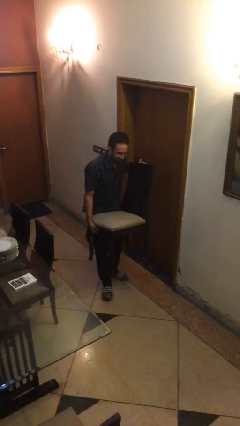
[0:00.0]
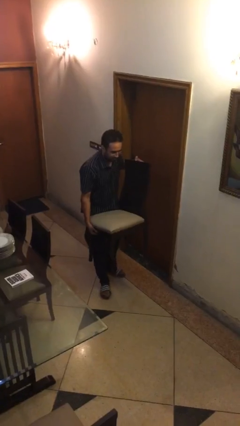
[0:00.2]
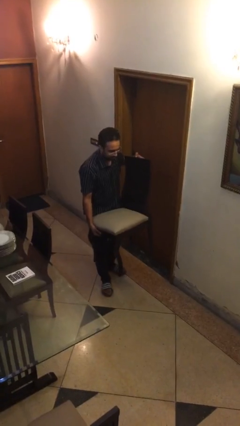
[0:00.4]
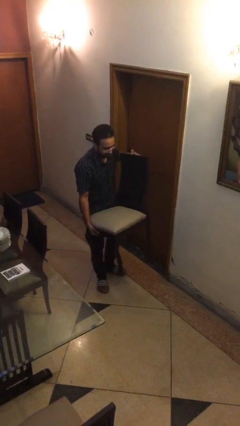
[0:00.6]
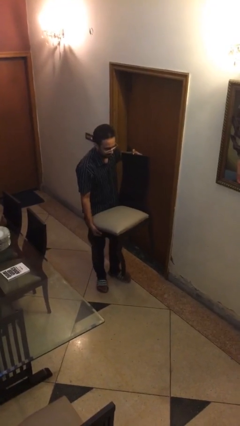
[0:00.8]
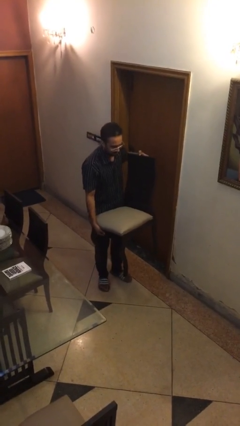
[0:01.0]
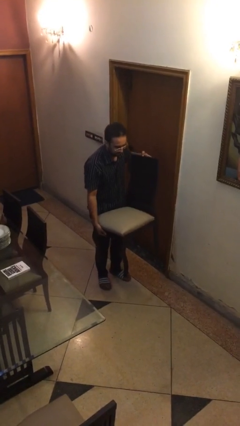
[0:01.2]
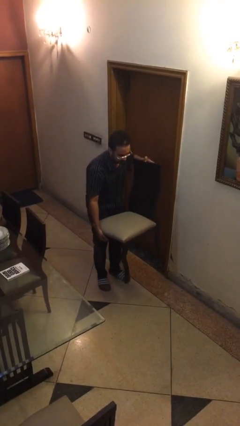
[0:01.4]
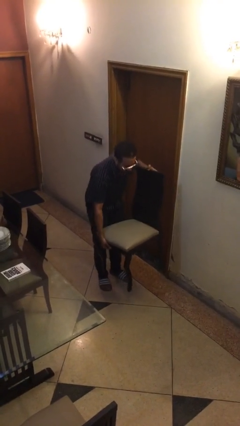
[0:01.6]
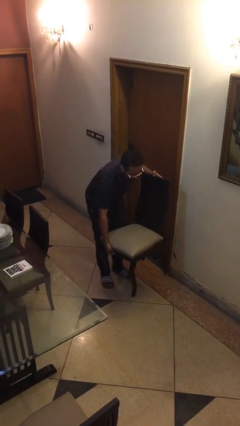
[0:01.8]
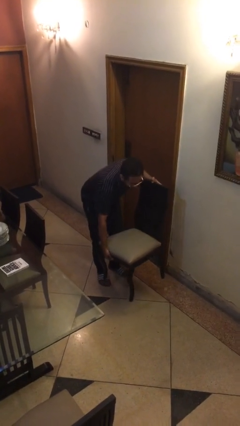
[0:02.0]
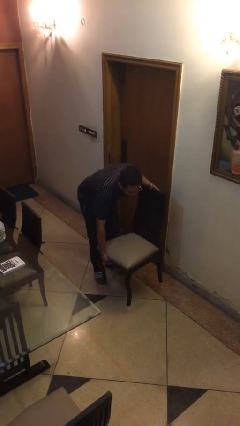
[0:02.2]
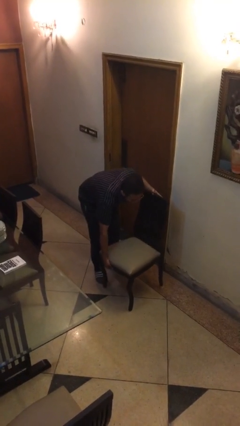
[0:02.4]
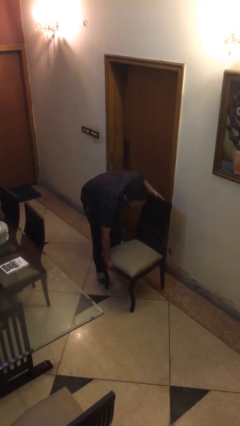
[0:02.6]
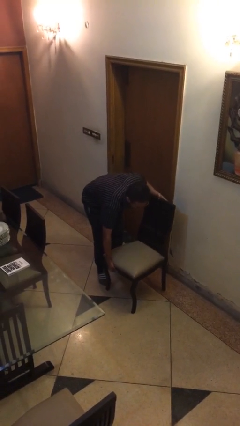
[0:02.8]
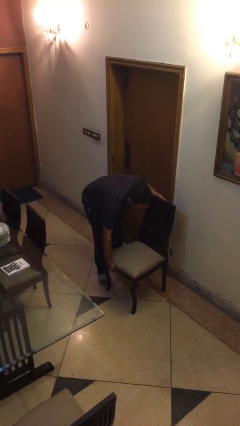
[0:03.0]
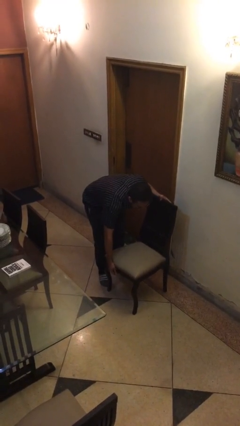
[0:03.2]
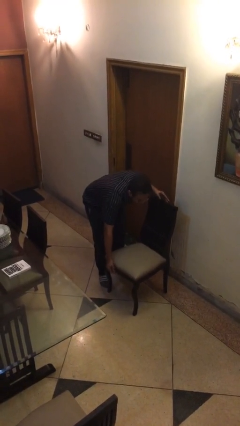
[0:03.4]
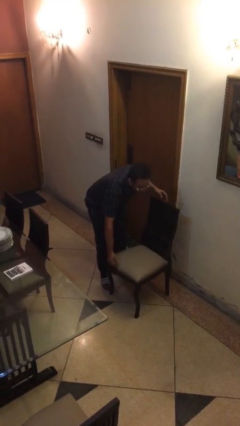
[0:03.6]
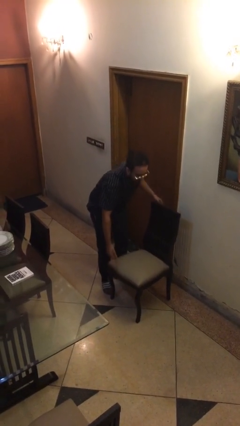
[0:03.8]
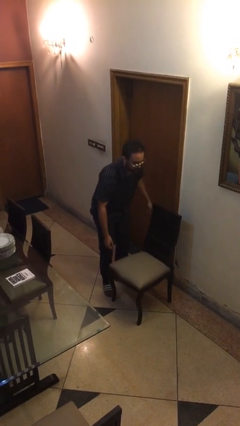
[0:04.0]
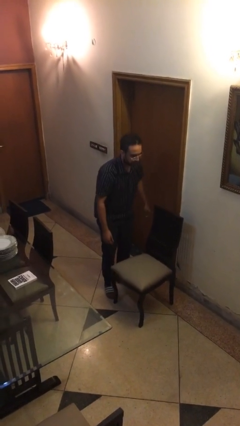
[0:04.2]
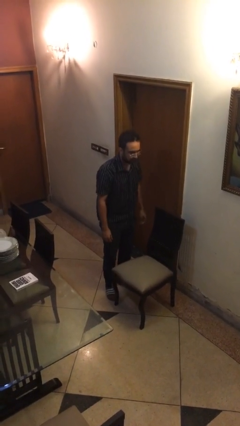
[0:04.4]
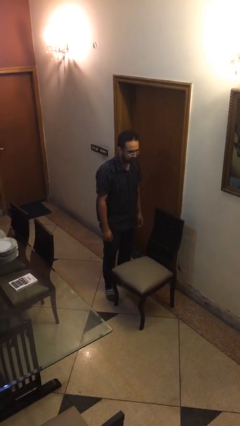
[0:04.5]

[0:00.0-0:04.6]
person puts down object on floor

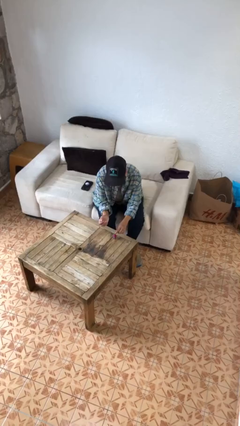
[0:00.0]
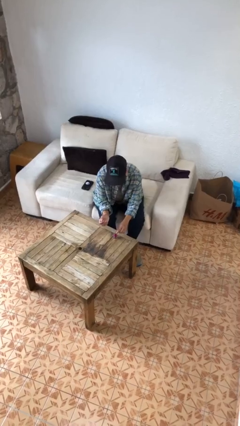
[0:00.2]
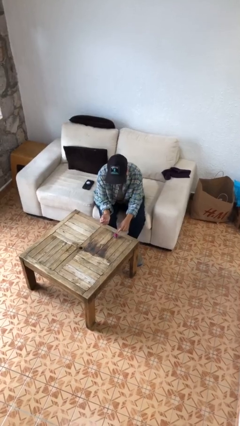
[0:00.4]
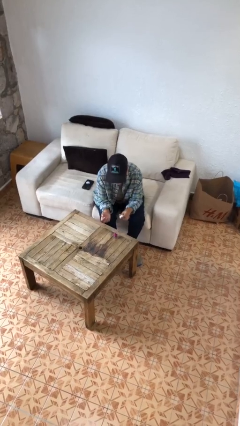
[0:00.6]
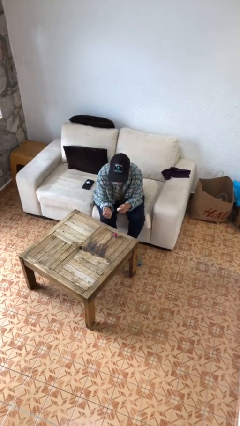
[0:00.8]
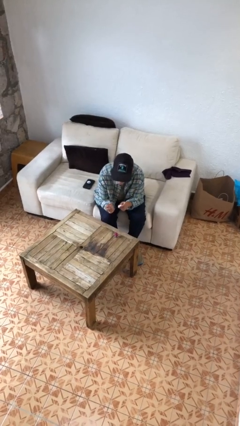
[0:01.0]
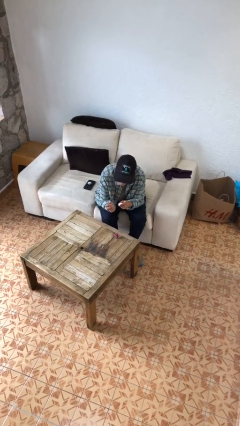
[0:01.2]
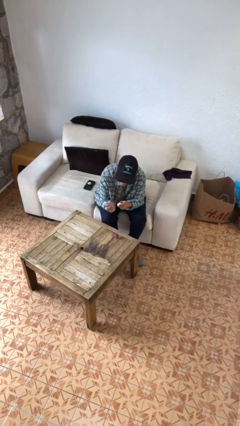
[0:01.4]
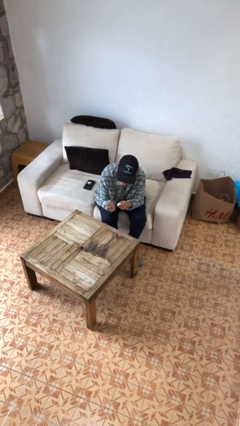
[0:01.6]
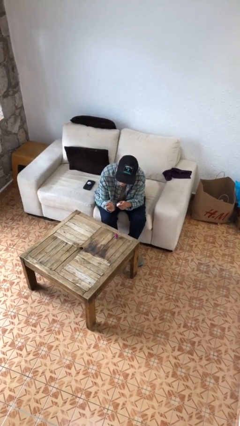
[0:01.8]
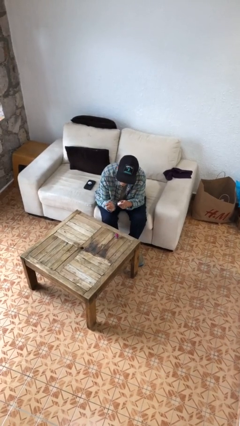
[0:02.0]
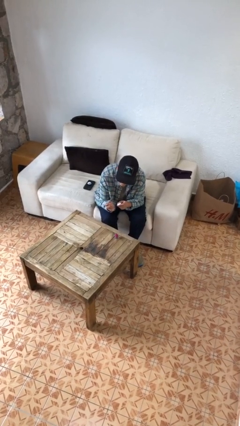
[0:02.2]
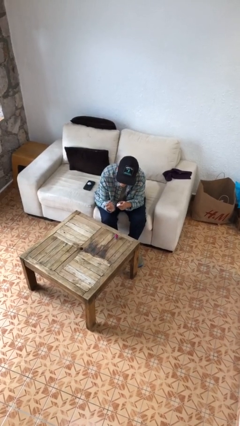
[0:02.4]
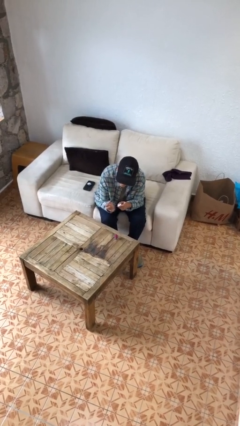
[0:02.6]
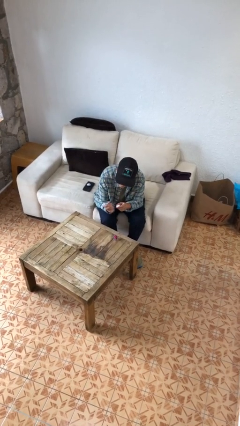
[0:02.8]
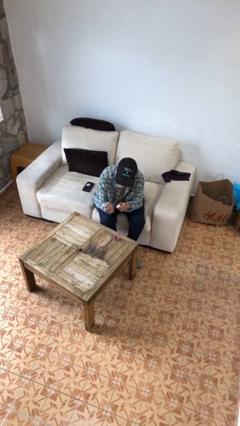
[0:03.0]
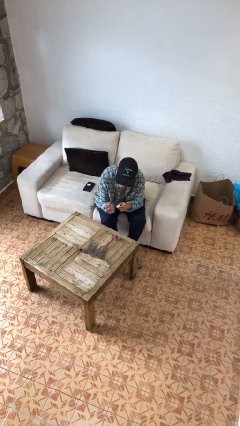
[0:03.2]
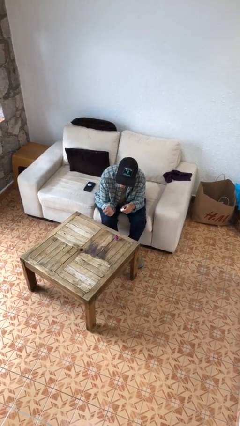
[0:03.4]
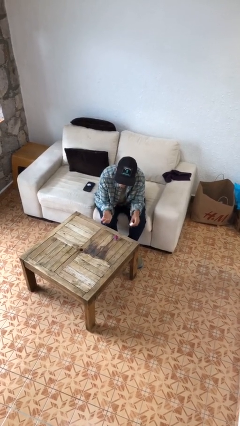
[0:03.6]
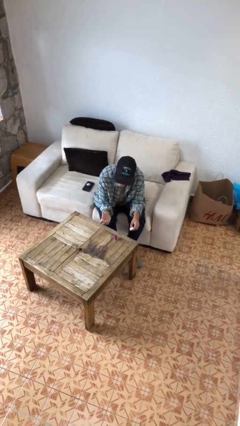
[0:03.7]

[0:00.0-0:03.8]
person paints fingernails

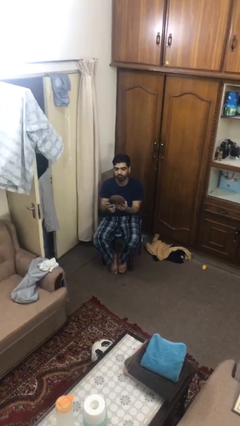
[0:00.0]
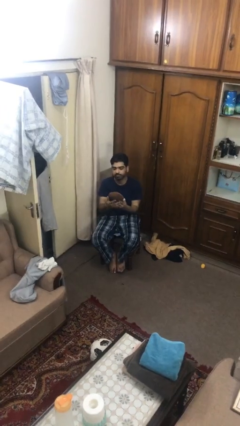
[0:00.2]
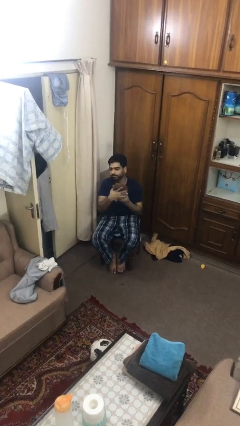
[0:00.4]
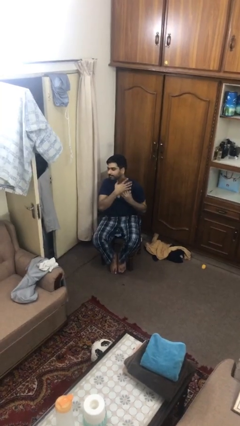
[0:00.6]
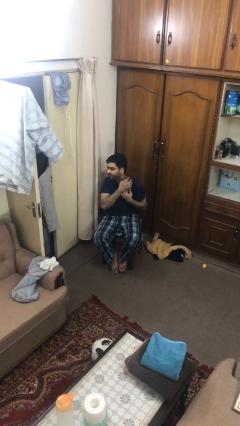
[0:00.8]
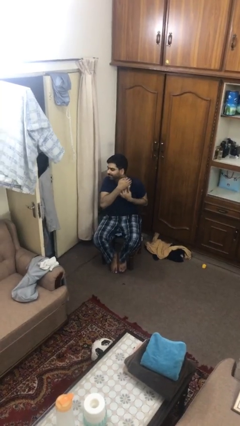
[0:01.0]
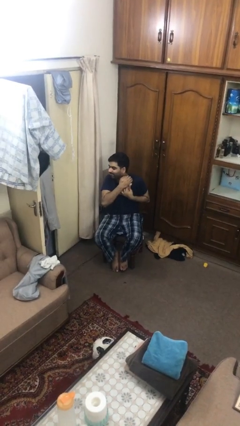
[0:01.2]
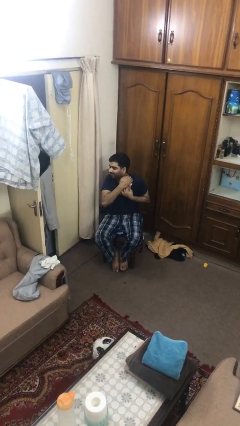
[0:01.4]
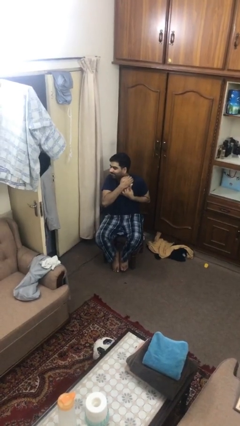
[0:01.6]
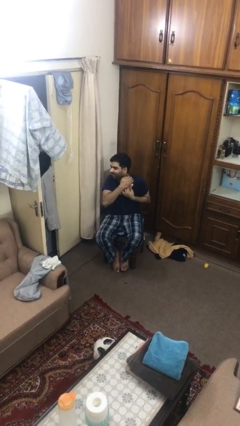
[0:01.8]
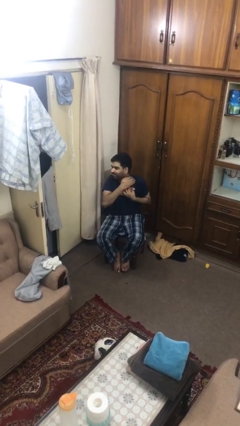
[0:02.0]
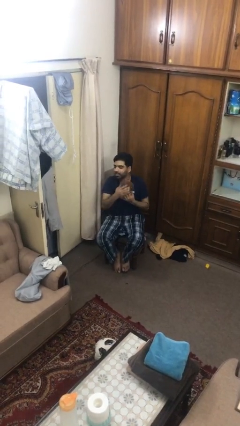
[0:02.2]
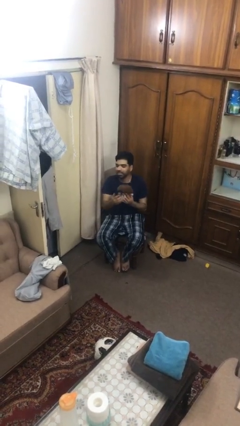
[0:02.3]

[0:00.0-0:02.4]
person hugs stuffed animal

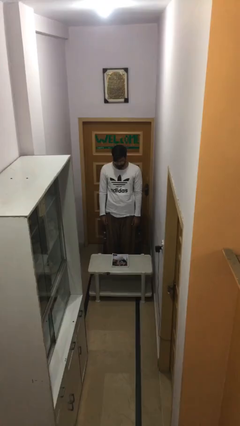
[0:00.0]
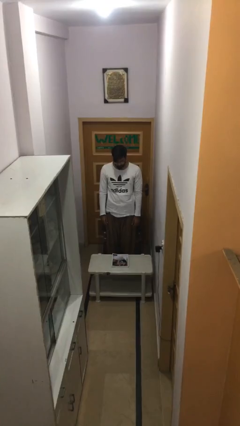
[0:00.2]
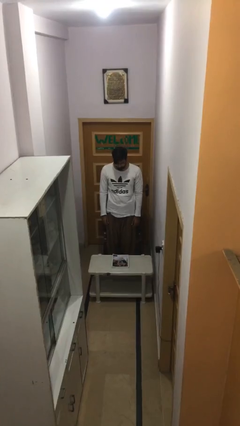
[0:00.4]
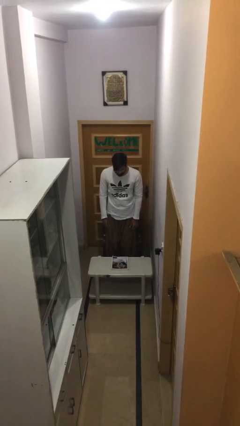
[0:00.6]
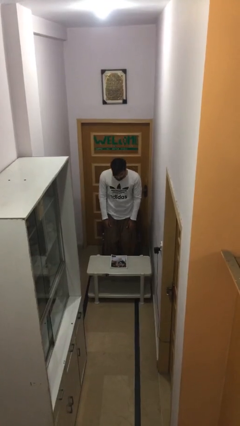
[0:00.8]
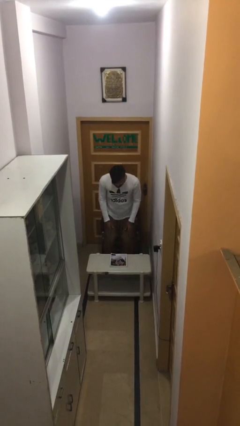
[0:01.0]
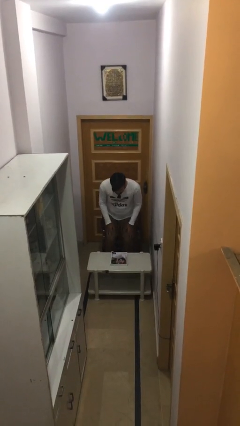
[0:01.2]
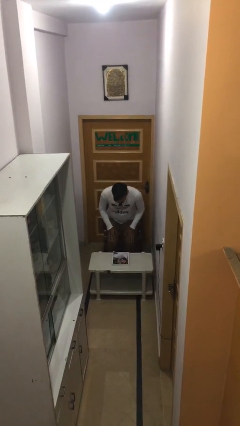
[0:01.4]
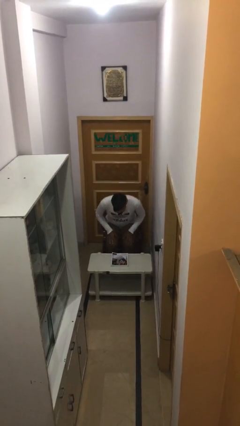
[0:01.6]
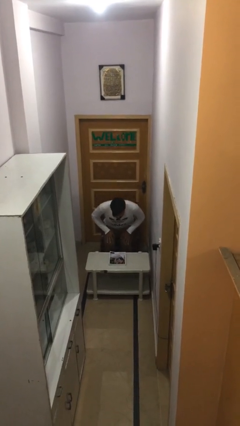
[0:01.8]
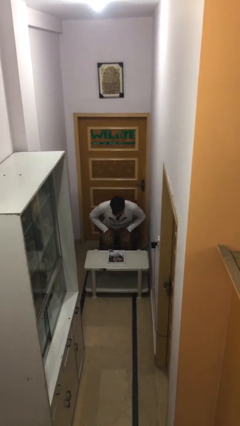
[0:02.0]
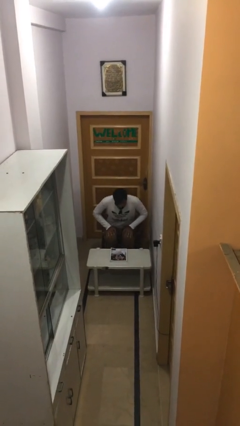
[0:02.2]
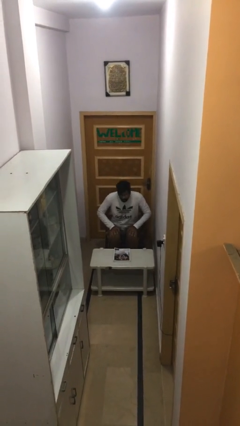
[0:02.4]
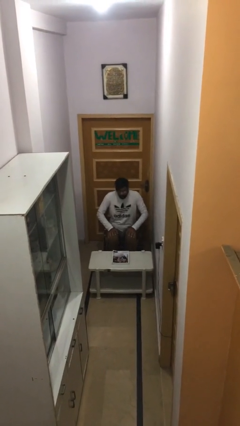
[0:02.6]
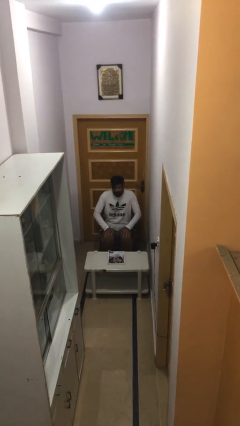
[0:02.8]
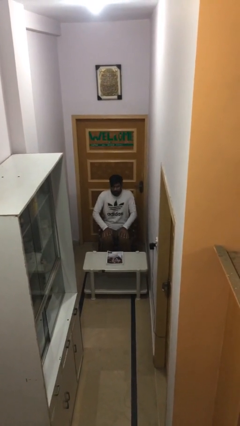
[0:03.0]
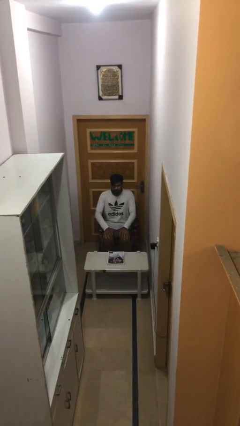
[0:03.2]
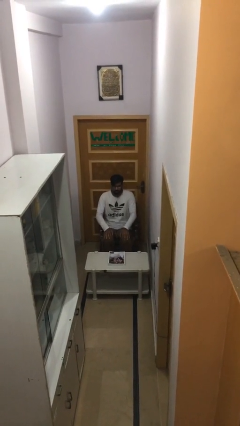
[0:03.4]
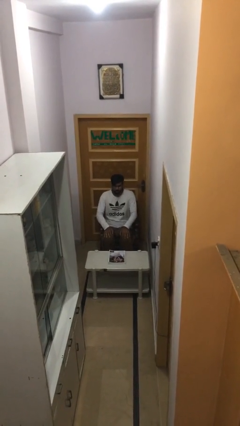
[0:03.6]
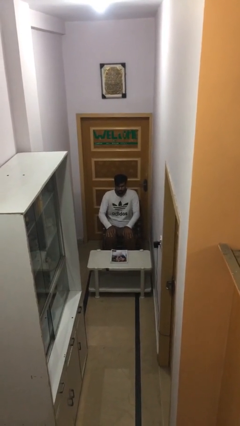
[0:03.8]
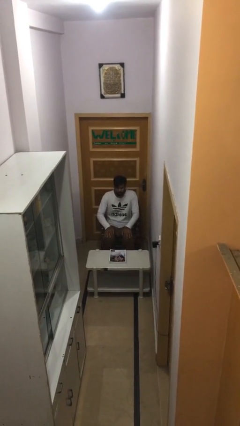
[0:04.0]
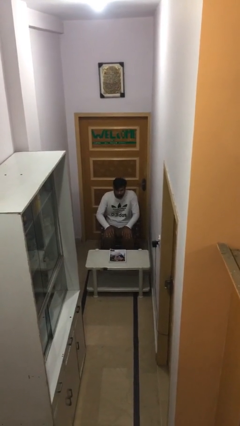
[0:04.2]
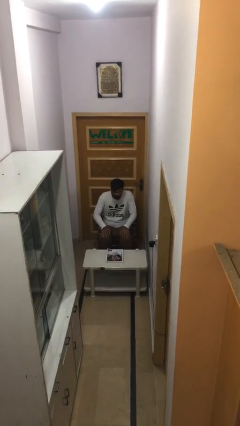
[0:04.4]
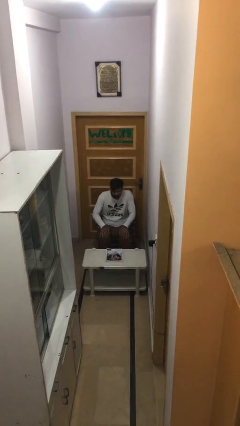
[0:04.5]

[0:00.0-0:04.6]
person sits down

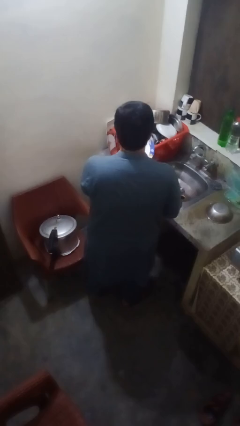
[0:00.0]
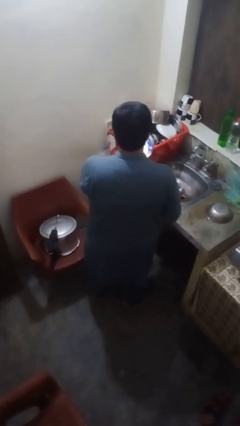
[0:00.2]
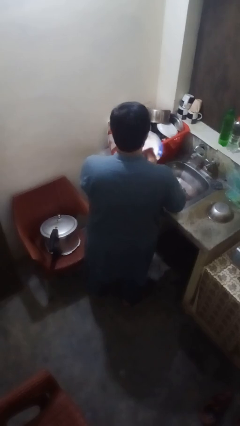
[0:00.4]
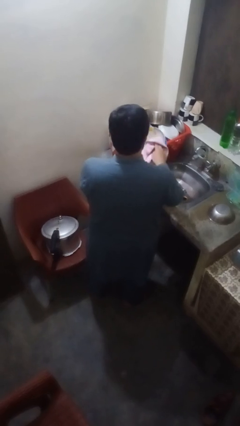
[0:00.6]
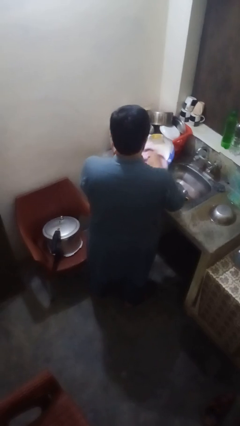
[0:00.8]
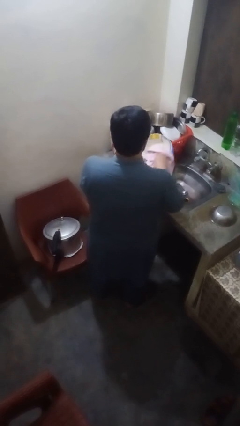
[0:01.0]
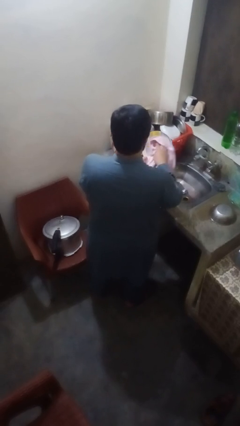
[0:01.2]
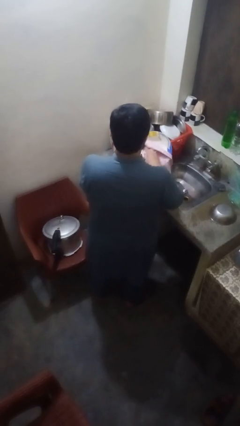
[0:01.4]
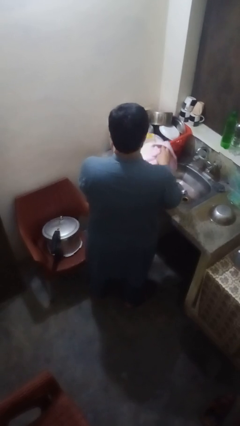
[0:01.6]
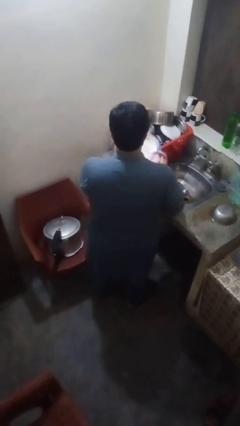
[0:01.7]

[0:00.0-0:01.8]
person dries dish
